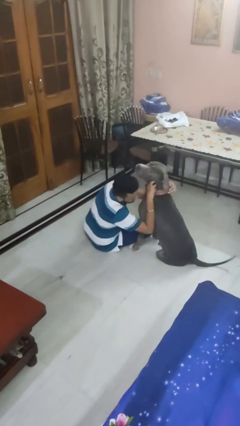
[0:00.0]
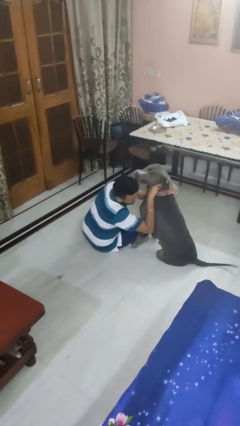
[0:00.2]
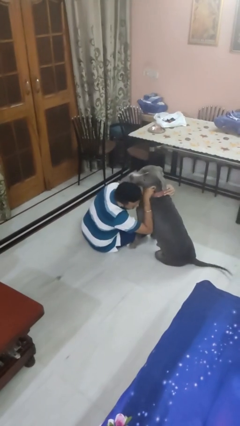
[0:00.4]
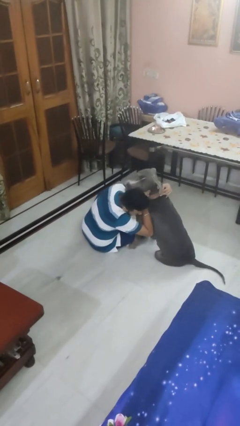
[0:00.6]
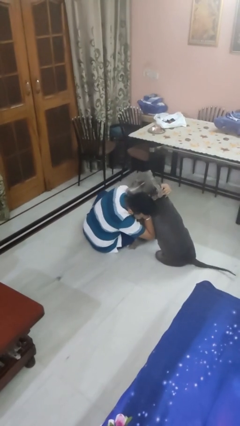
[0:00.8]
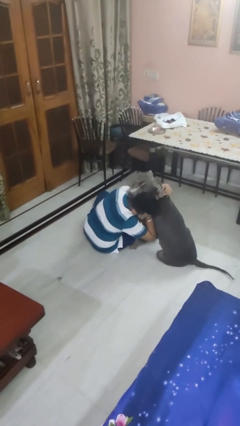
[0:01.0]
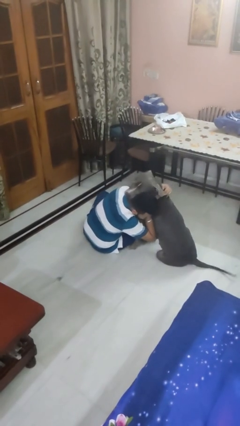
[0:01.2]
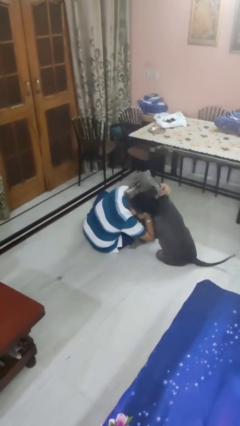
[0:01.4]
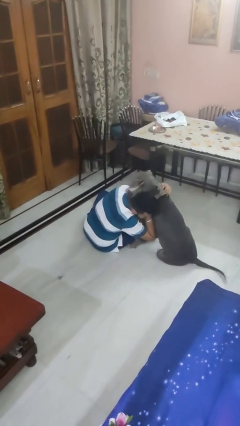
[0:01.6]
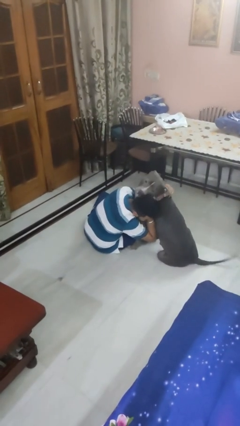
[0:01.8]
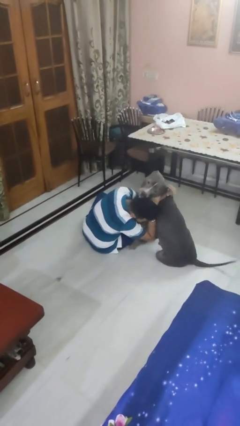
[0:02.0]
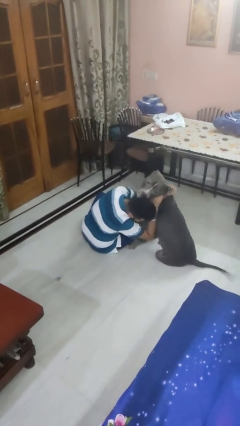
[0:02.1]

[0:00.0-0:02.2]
person hugs dog

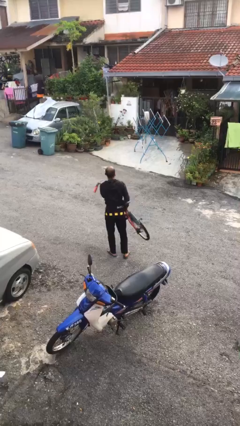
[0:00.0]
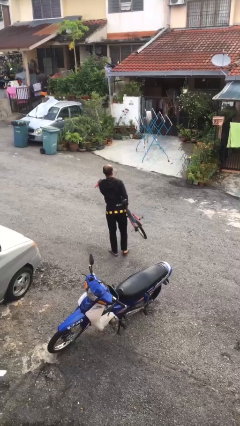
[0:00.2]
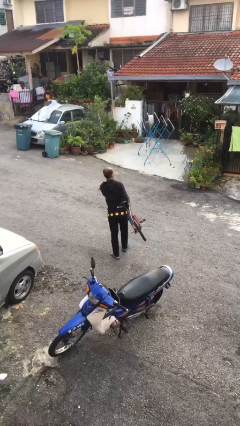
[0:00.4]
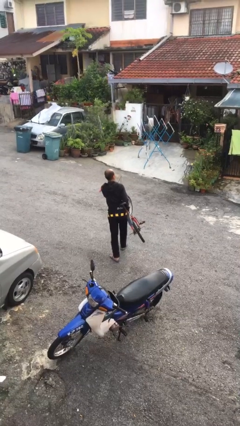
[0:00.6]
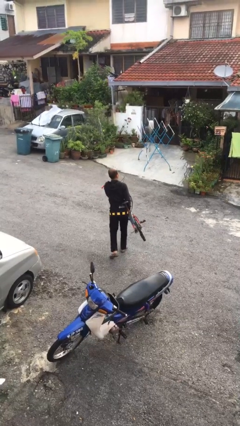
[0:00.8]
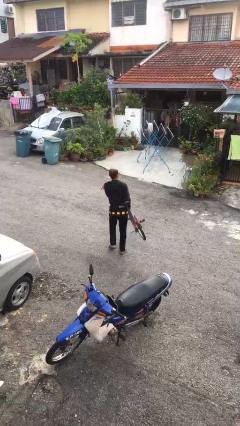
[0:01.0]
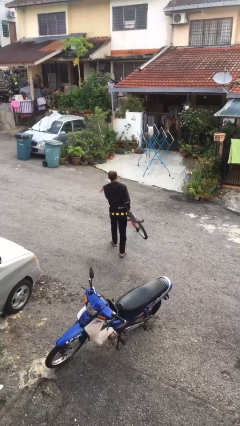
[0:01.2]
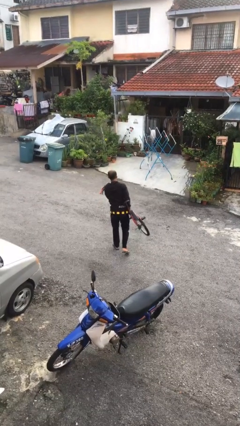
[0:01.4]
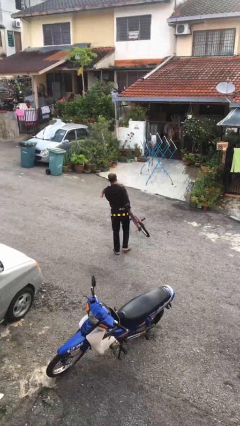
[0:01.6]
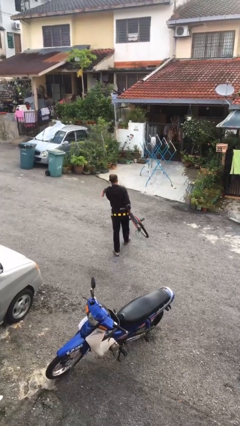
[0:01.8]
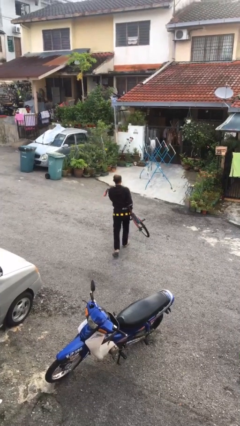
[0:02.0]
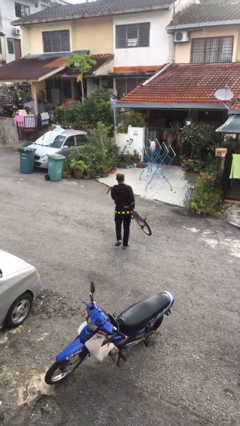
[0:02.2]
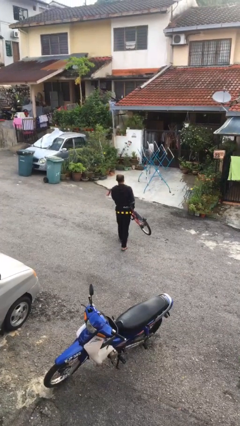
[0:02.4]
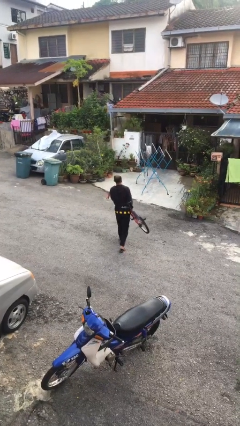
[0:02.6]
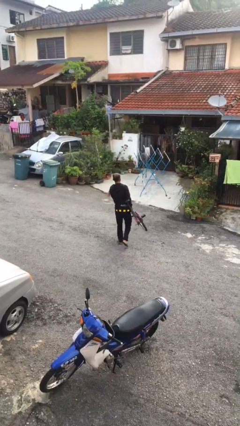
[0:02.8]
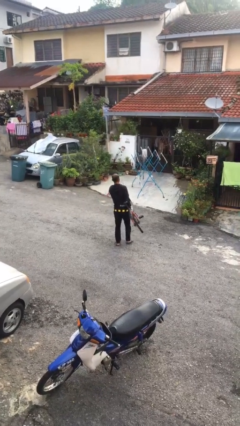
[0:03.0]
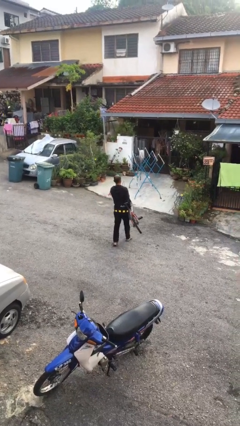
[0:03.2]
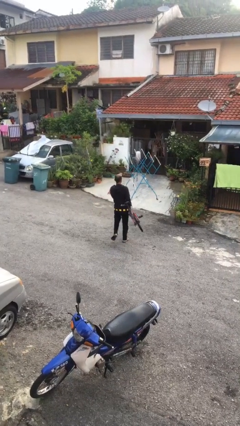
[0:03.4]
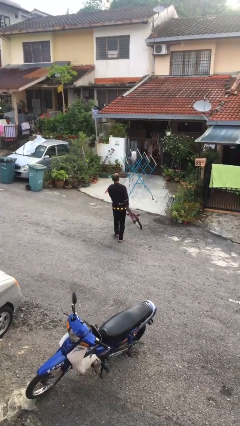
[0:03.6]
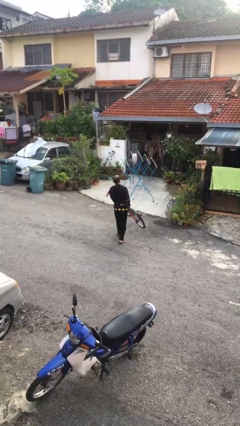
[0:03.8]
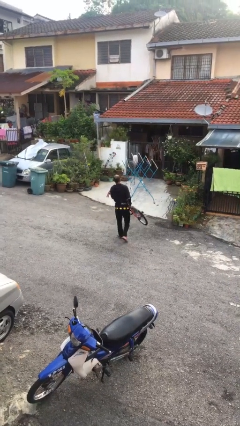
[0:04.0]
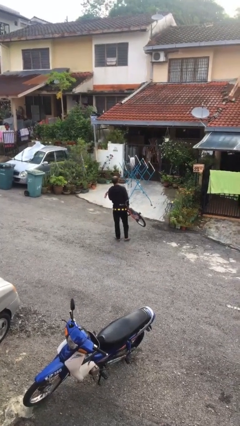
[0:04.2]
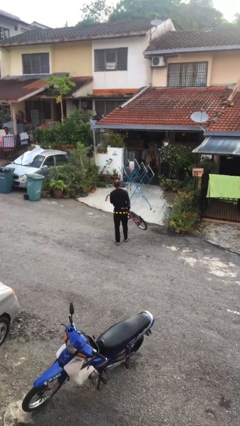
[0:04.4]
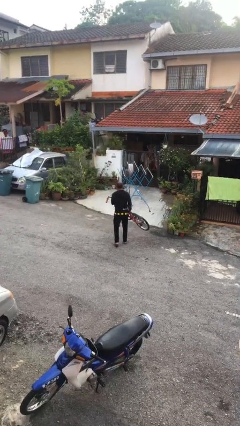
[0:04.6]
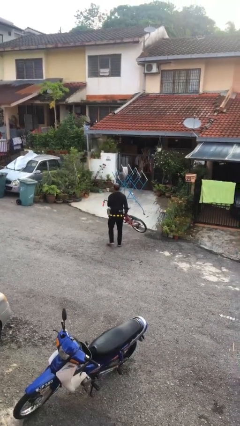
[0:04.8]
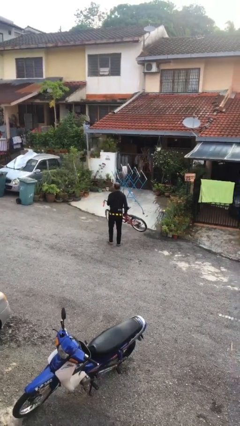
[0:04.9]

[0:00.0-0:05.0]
person carries heavy object

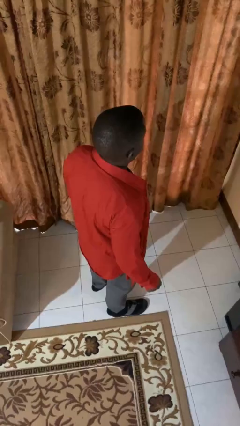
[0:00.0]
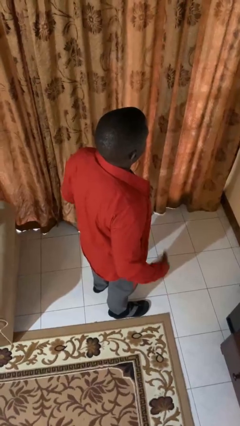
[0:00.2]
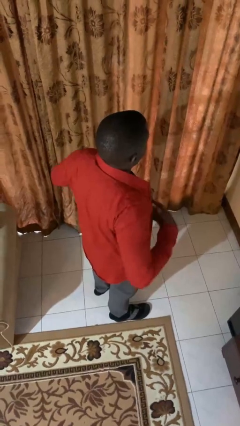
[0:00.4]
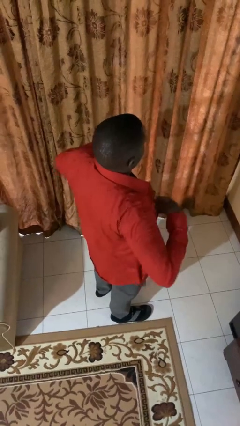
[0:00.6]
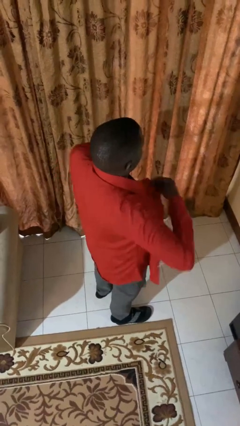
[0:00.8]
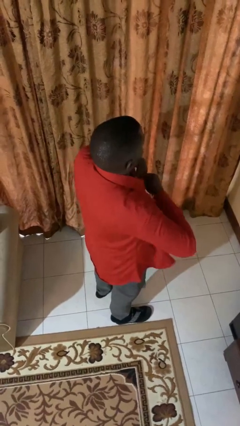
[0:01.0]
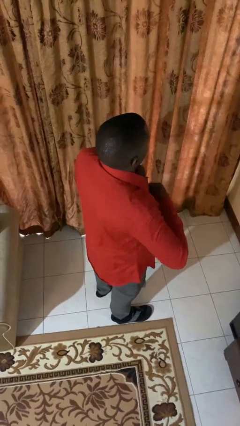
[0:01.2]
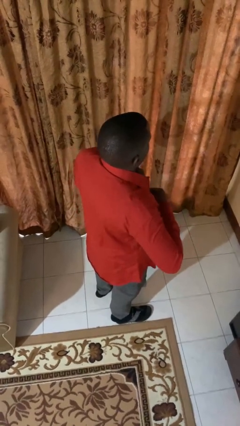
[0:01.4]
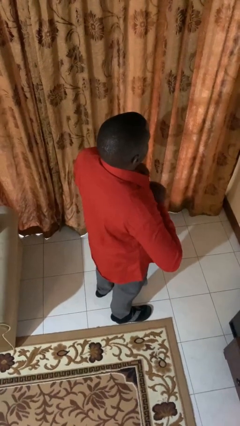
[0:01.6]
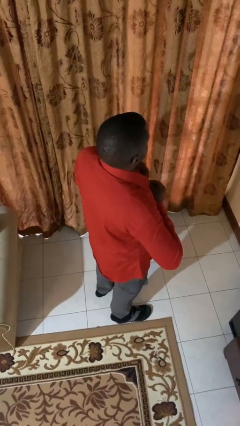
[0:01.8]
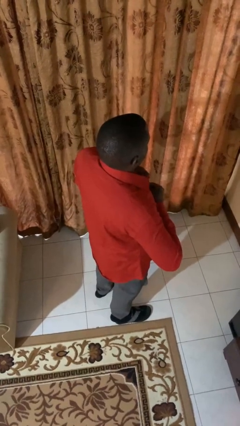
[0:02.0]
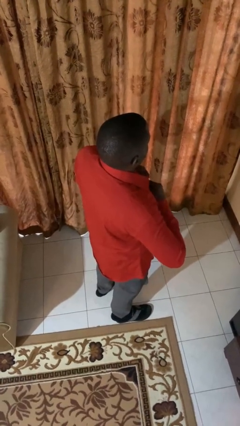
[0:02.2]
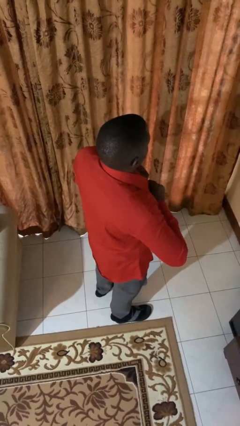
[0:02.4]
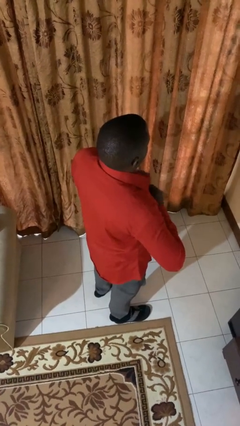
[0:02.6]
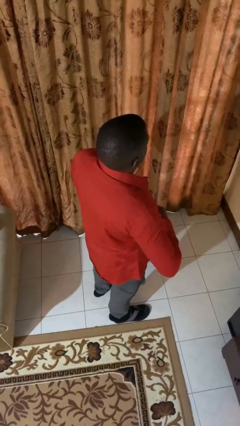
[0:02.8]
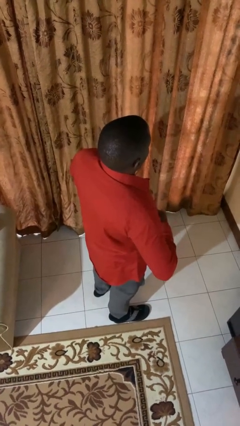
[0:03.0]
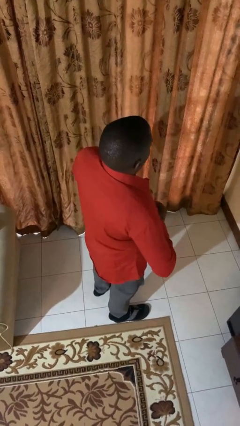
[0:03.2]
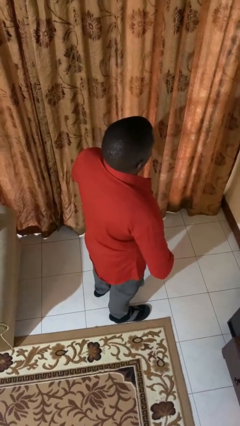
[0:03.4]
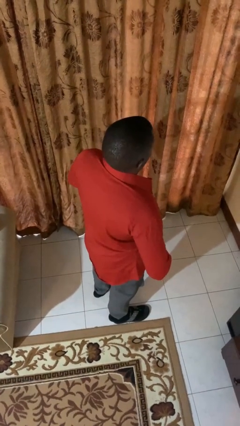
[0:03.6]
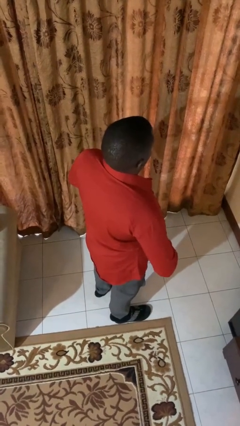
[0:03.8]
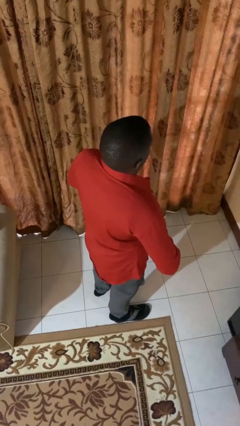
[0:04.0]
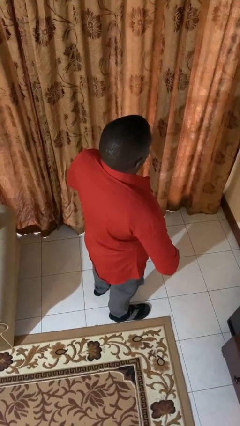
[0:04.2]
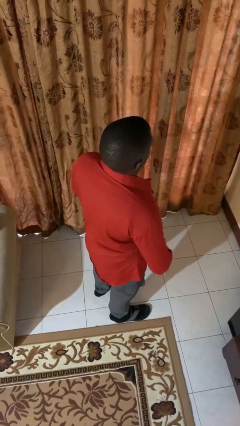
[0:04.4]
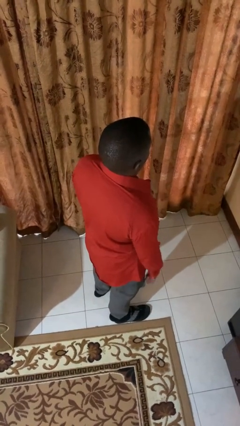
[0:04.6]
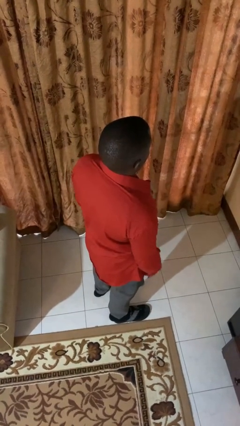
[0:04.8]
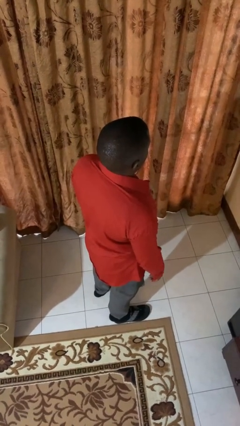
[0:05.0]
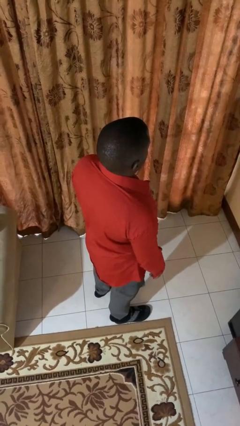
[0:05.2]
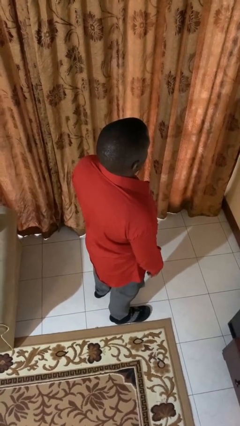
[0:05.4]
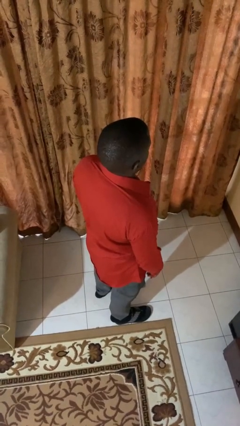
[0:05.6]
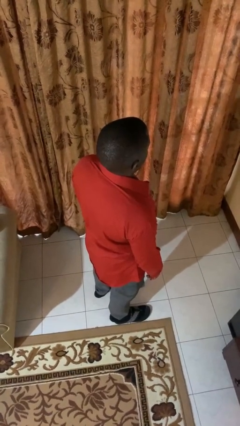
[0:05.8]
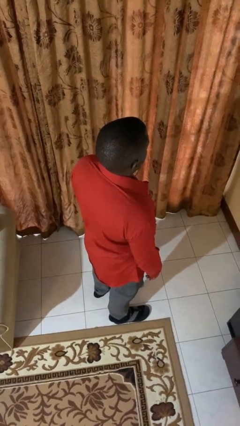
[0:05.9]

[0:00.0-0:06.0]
person buttons shirt

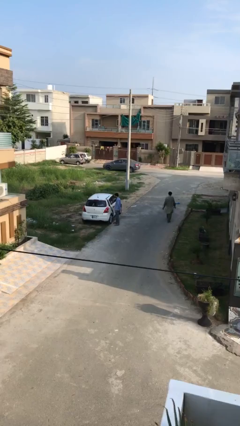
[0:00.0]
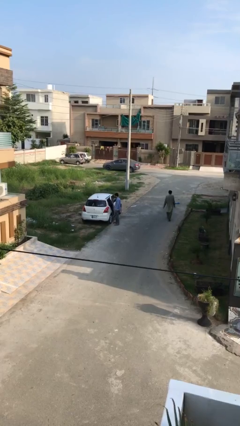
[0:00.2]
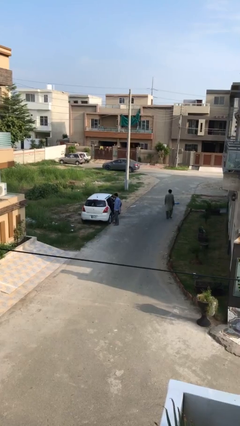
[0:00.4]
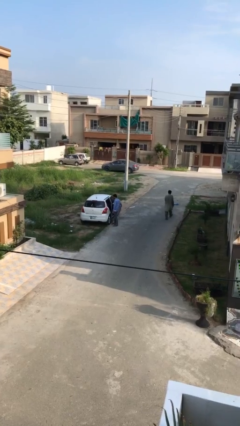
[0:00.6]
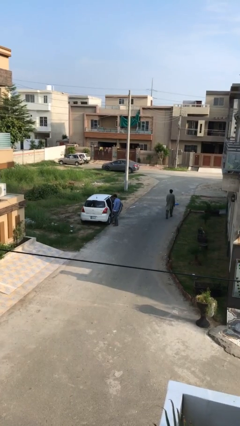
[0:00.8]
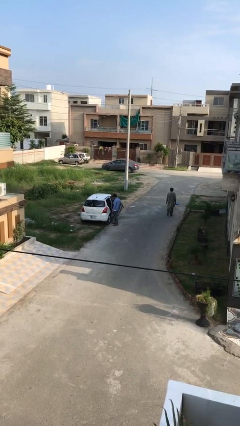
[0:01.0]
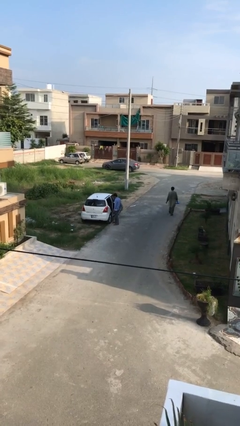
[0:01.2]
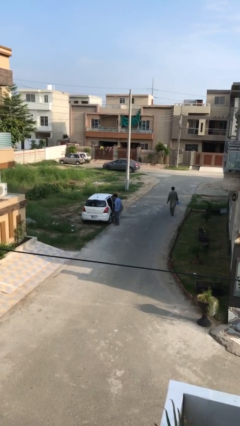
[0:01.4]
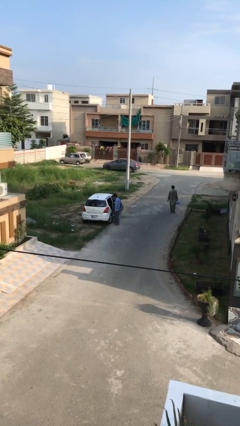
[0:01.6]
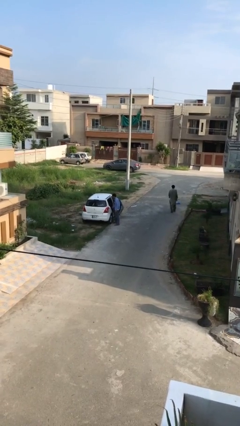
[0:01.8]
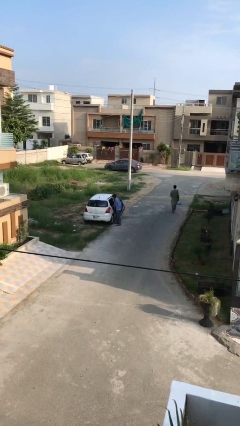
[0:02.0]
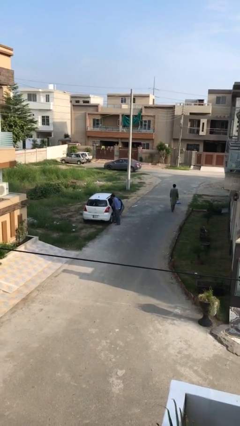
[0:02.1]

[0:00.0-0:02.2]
person opens car door

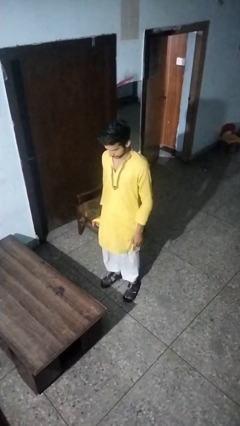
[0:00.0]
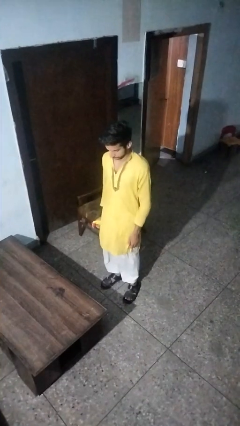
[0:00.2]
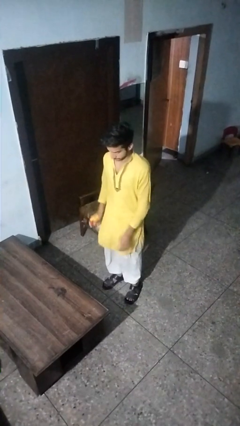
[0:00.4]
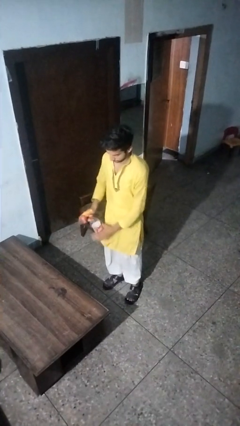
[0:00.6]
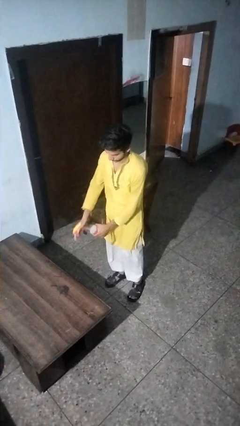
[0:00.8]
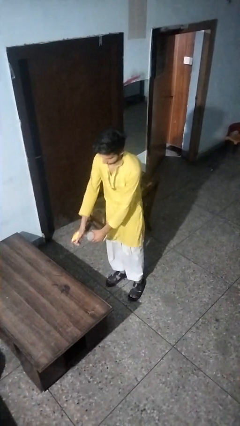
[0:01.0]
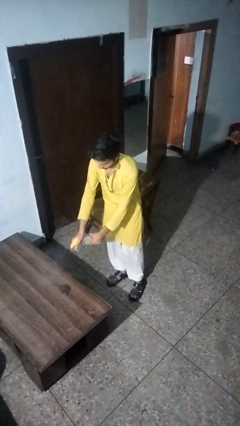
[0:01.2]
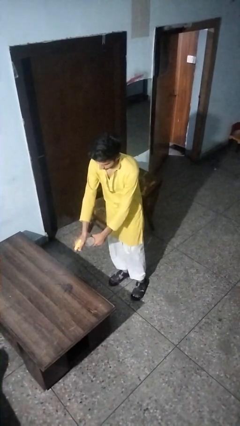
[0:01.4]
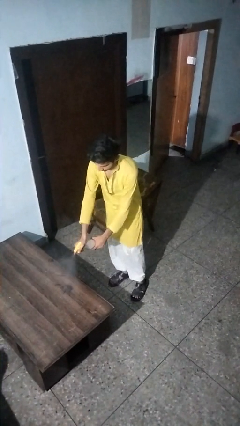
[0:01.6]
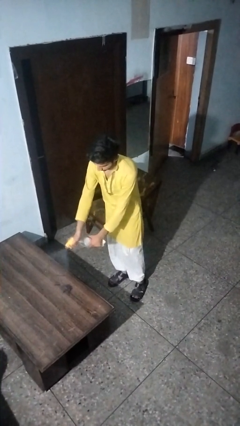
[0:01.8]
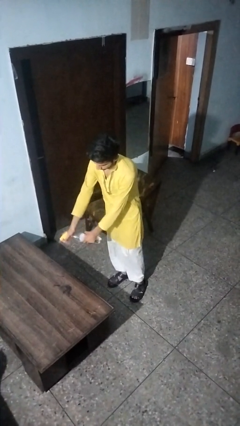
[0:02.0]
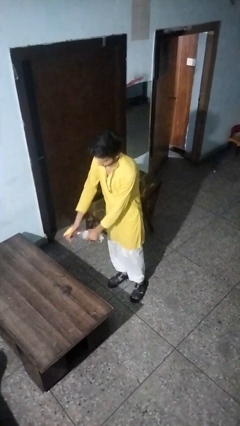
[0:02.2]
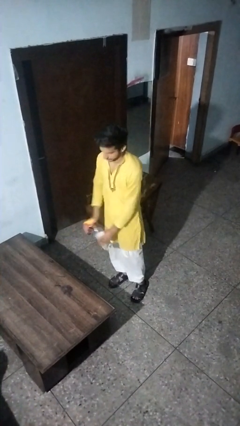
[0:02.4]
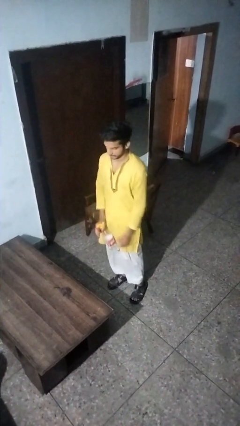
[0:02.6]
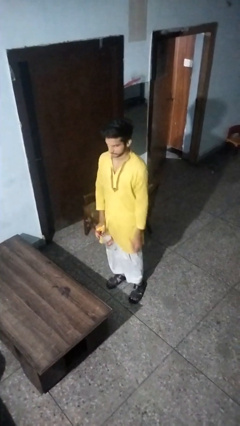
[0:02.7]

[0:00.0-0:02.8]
person sprays from bottle
